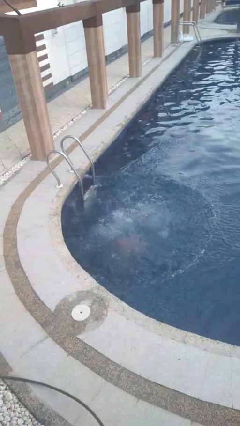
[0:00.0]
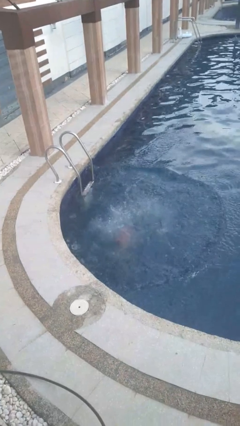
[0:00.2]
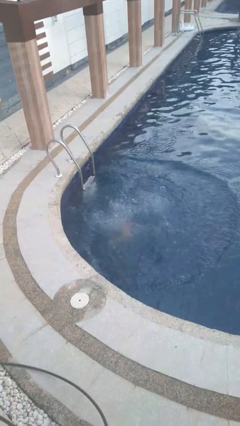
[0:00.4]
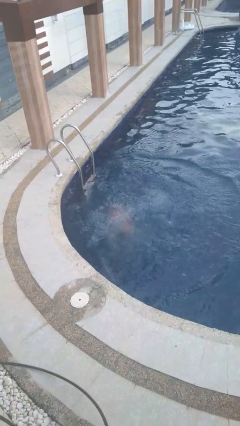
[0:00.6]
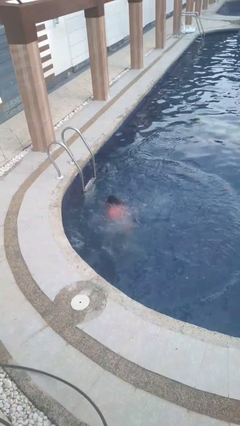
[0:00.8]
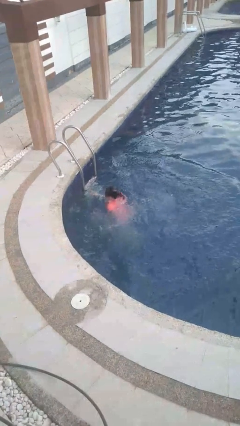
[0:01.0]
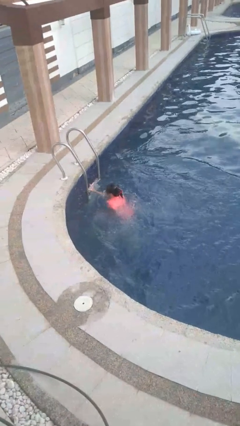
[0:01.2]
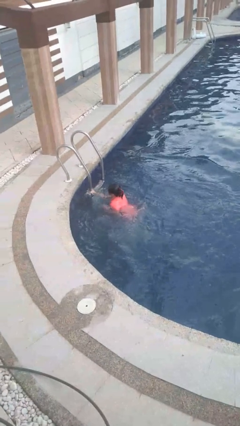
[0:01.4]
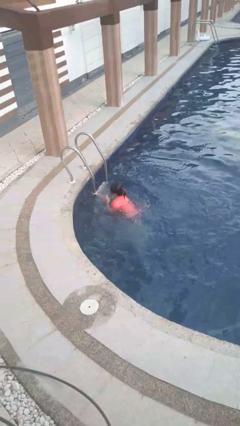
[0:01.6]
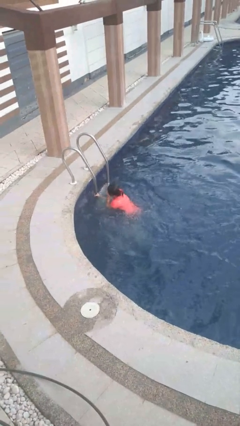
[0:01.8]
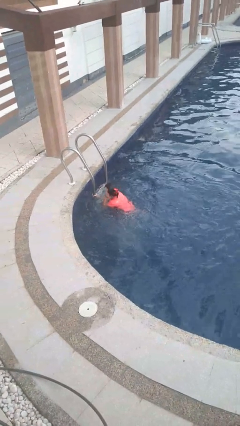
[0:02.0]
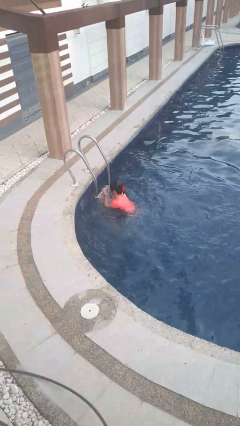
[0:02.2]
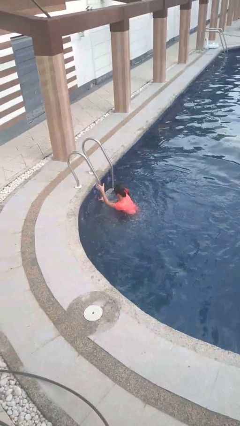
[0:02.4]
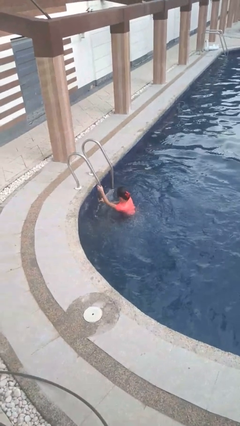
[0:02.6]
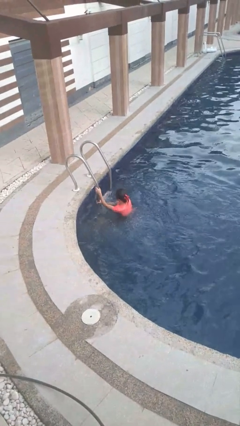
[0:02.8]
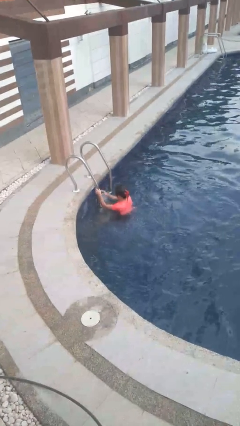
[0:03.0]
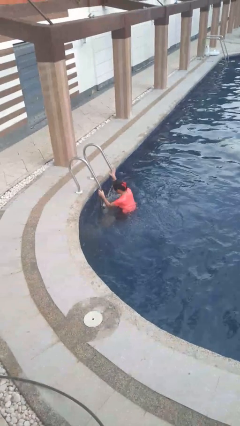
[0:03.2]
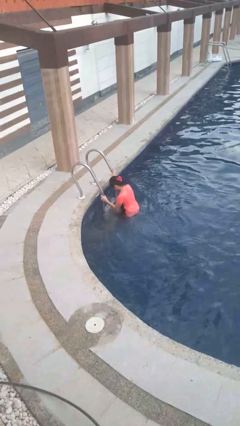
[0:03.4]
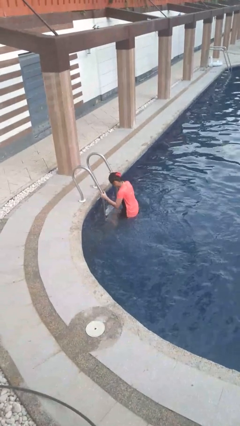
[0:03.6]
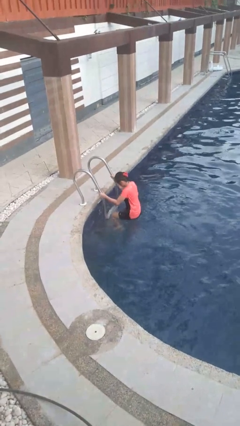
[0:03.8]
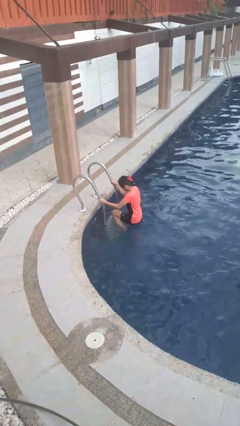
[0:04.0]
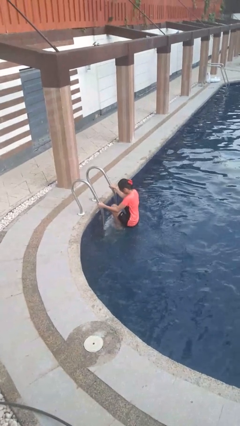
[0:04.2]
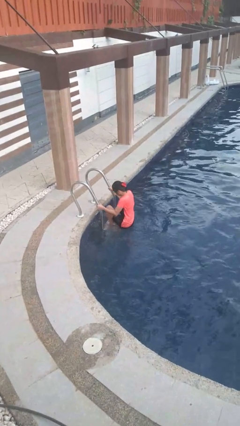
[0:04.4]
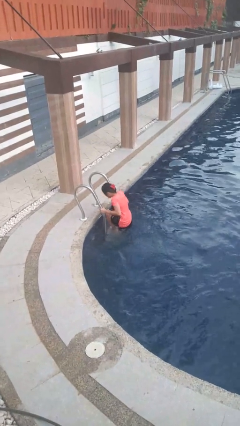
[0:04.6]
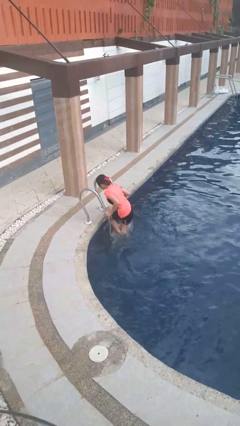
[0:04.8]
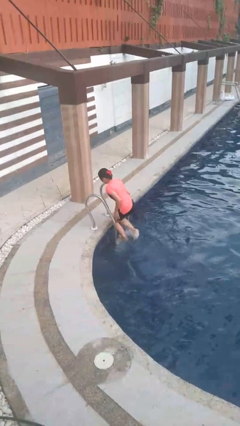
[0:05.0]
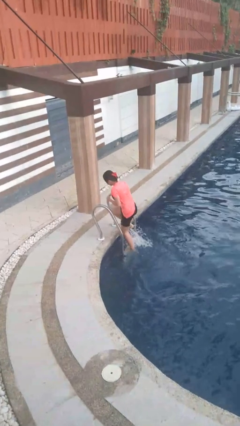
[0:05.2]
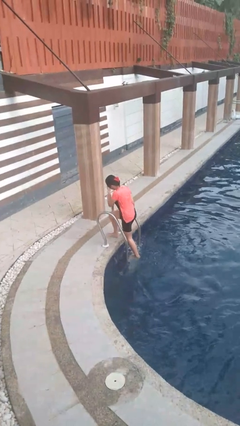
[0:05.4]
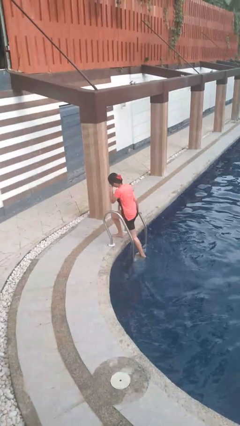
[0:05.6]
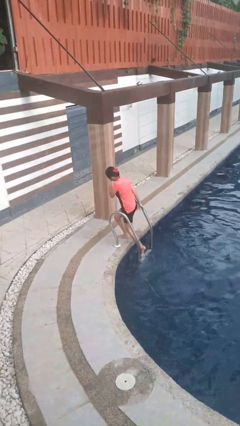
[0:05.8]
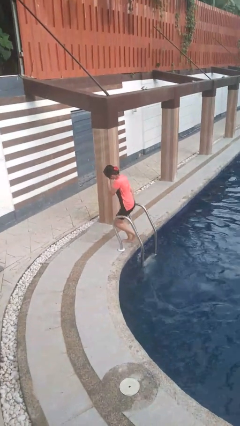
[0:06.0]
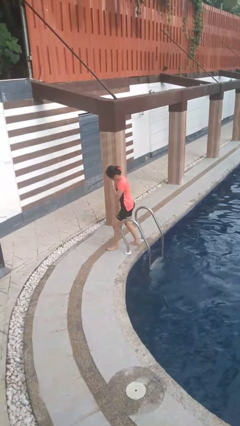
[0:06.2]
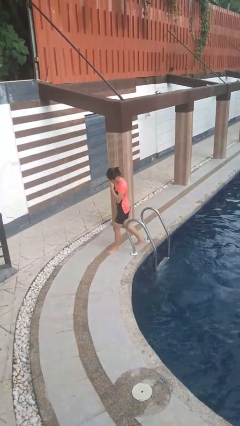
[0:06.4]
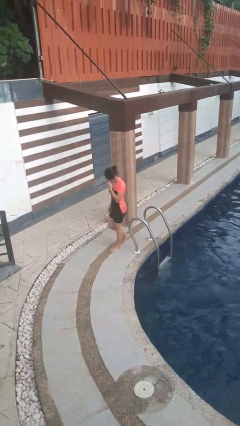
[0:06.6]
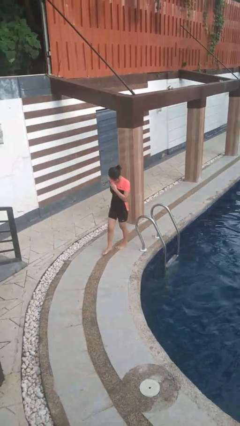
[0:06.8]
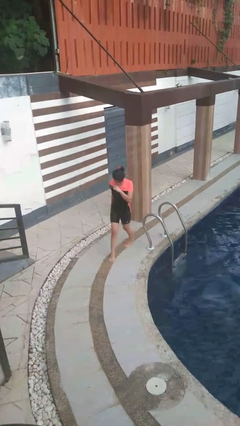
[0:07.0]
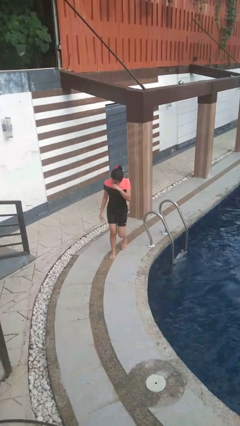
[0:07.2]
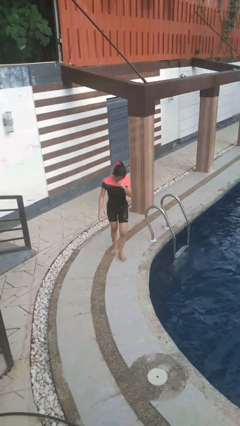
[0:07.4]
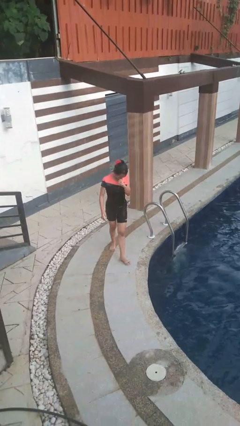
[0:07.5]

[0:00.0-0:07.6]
person exits pool

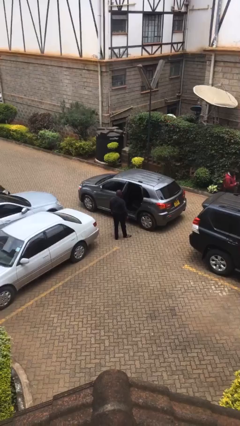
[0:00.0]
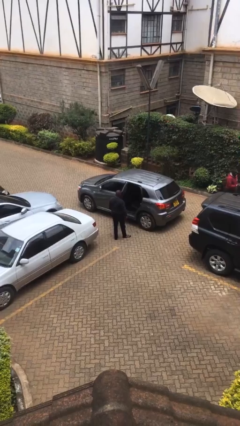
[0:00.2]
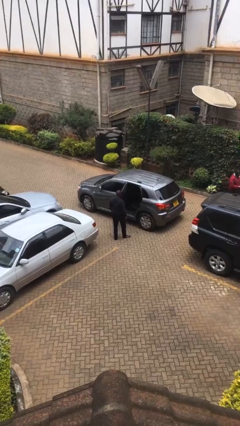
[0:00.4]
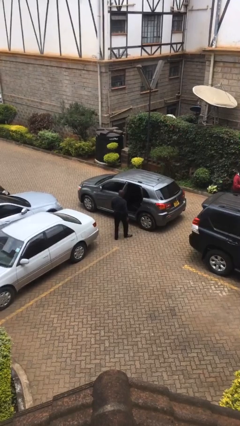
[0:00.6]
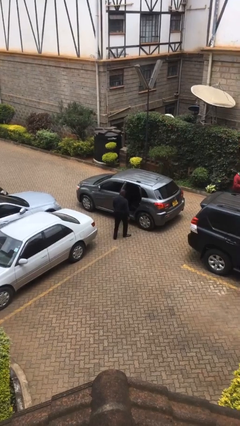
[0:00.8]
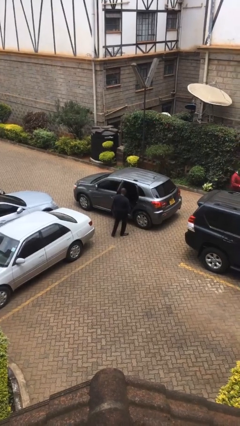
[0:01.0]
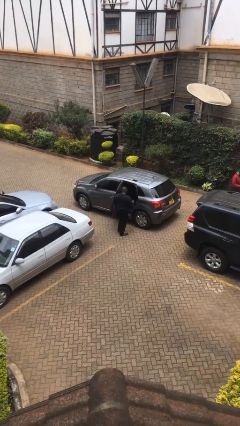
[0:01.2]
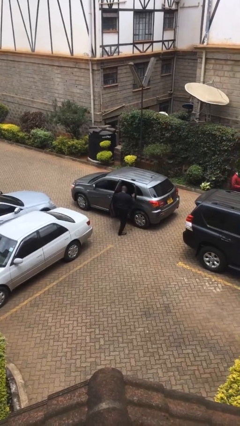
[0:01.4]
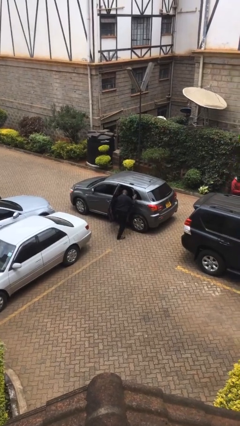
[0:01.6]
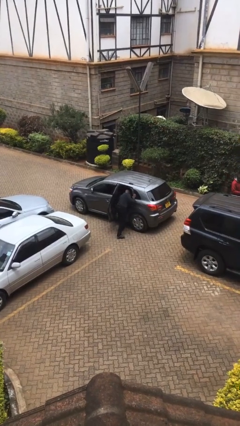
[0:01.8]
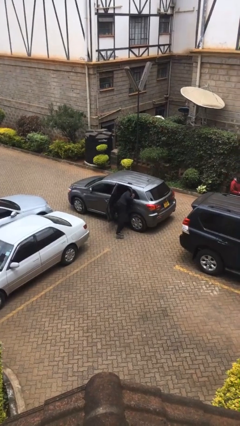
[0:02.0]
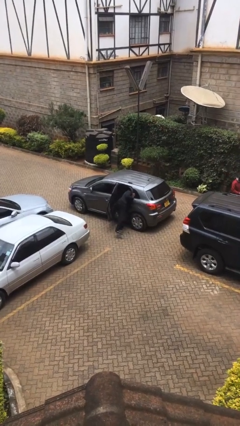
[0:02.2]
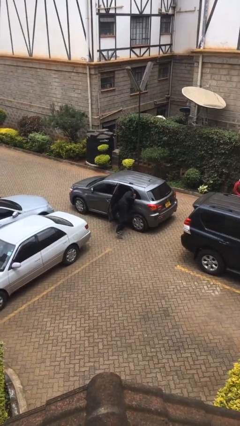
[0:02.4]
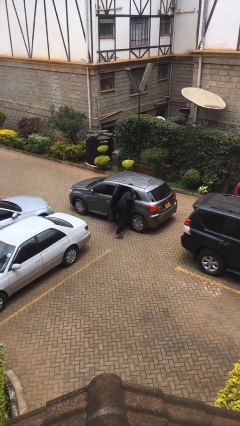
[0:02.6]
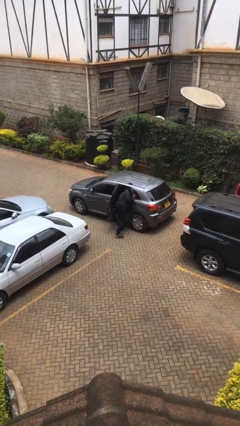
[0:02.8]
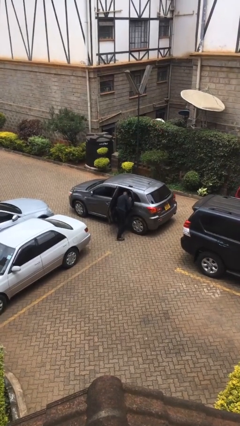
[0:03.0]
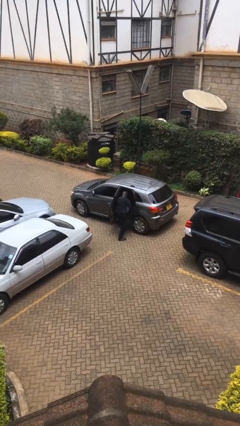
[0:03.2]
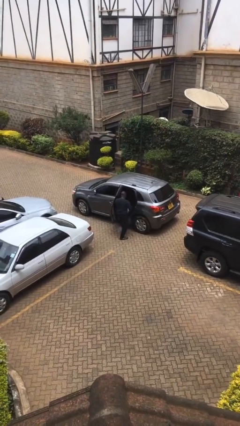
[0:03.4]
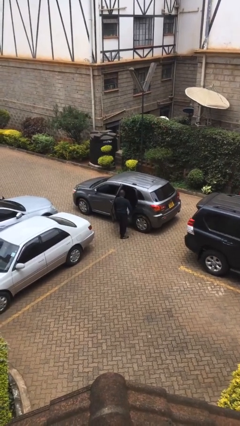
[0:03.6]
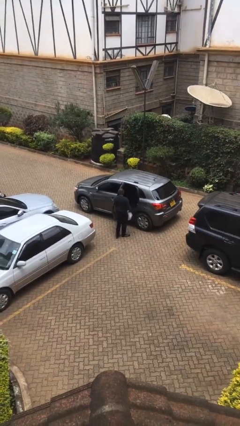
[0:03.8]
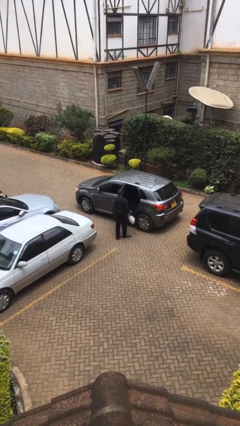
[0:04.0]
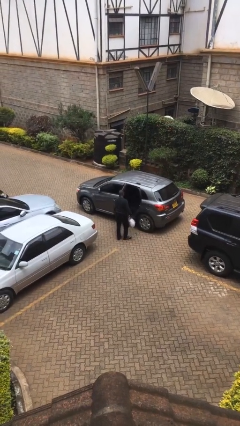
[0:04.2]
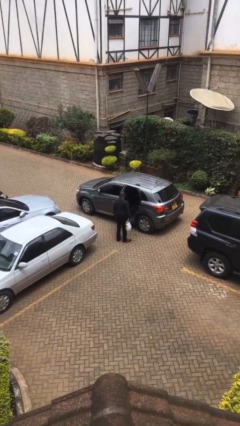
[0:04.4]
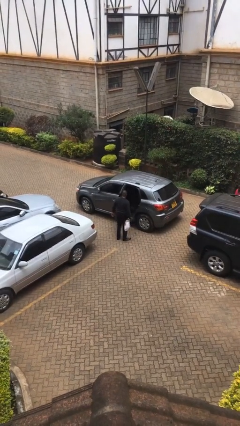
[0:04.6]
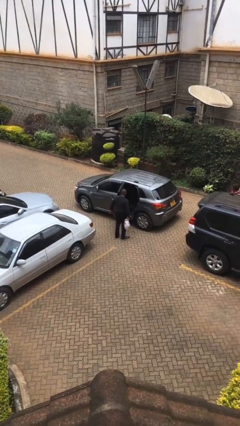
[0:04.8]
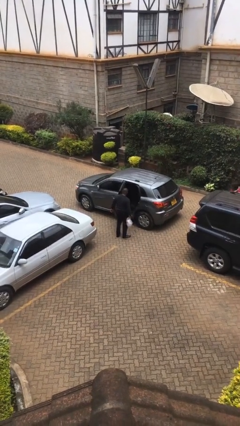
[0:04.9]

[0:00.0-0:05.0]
person unloads car

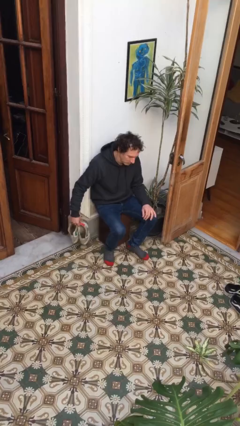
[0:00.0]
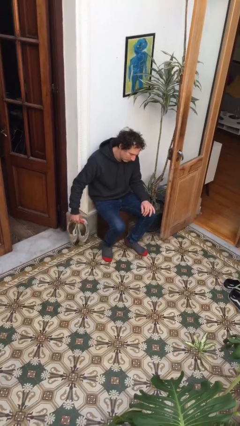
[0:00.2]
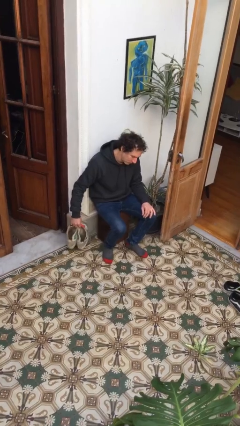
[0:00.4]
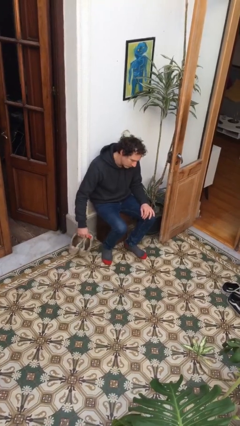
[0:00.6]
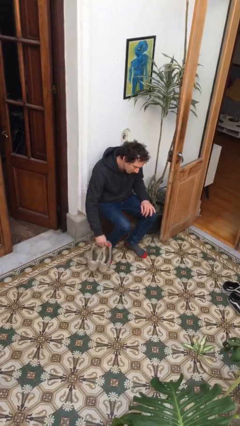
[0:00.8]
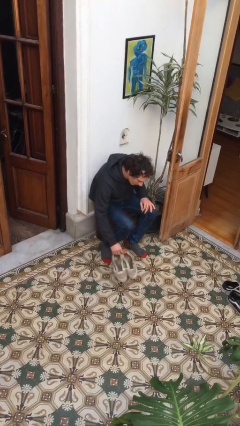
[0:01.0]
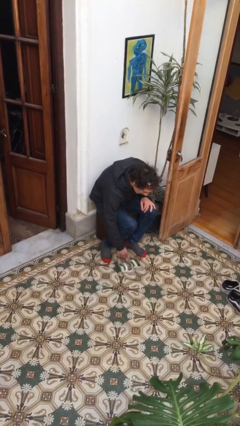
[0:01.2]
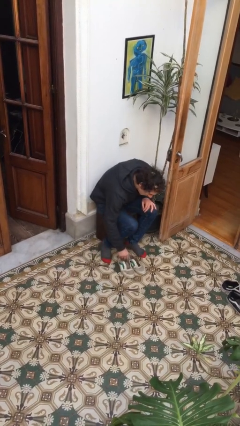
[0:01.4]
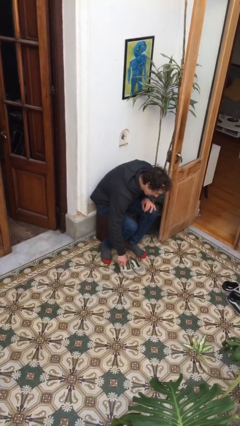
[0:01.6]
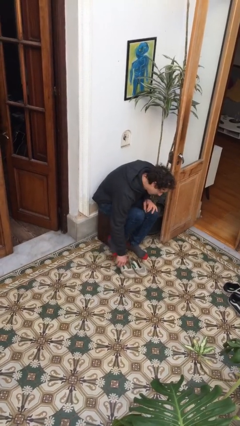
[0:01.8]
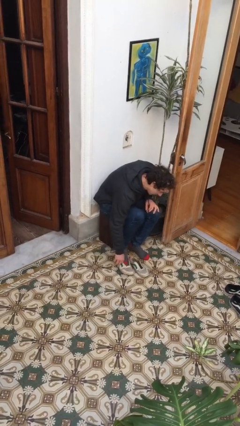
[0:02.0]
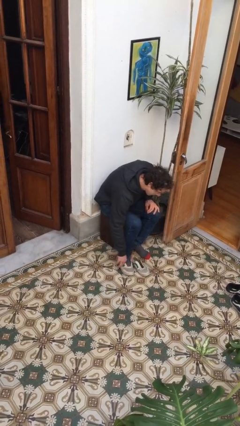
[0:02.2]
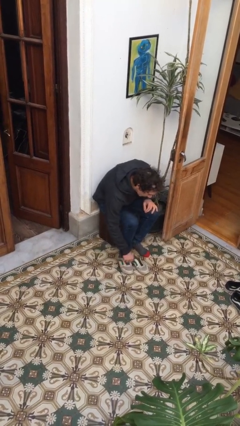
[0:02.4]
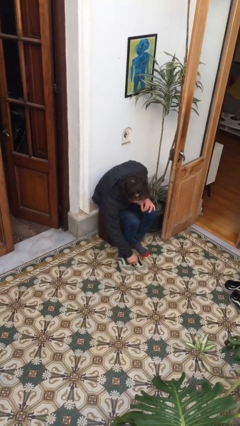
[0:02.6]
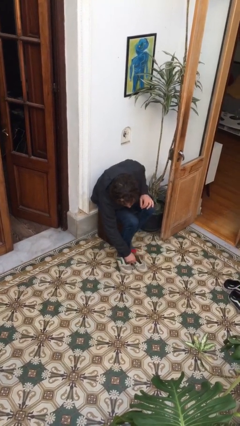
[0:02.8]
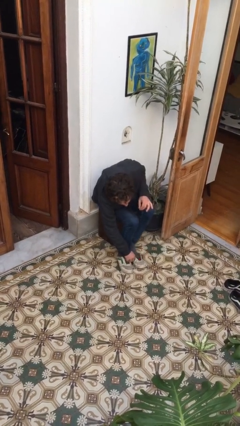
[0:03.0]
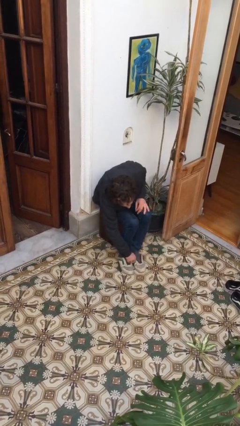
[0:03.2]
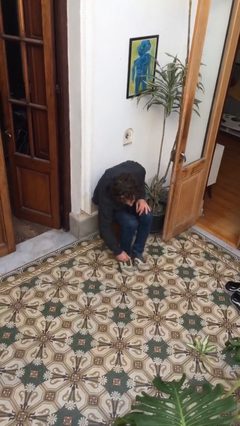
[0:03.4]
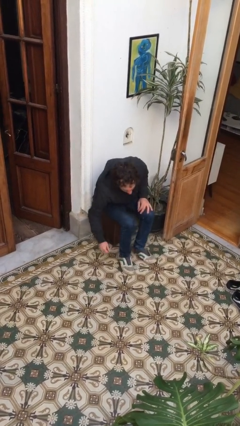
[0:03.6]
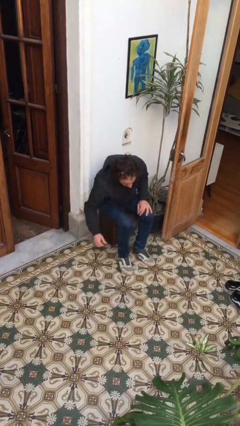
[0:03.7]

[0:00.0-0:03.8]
person puts on shoes

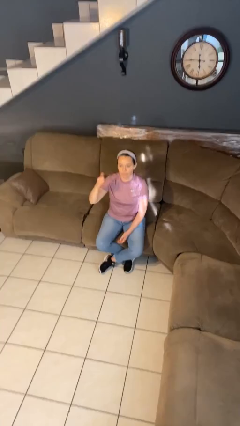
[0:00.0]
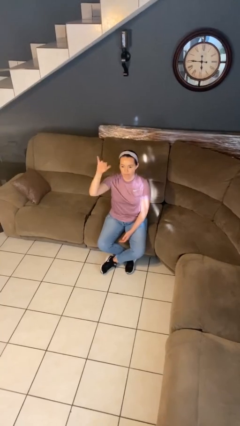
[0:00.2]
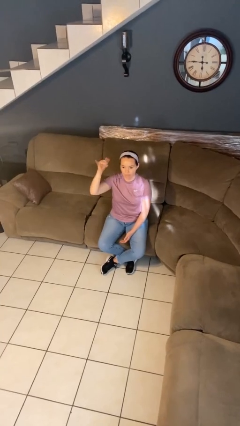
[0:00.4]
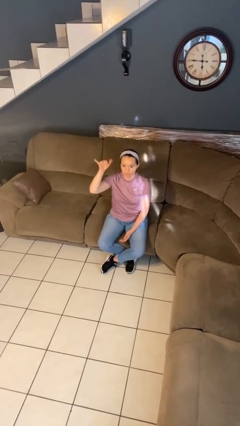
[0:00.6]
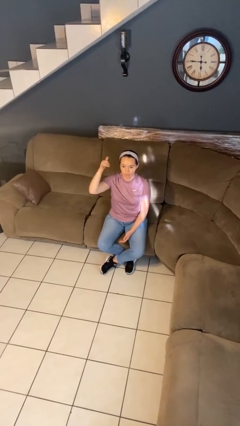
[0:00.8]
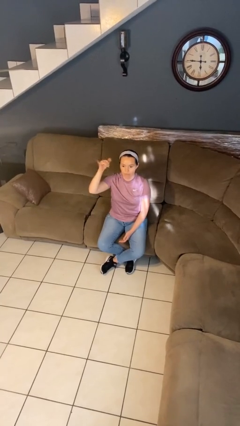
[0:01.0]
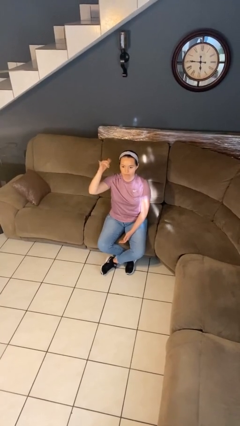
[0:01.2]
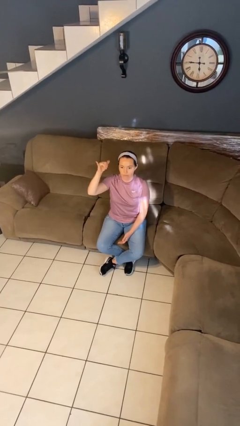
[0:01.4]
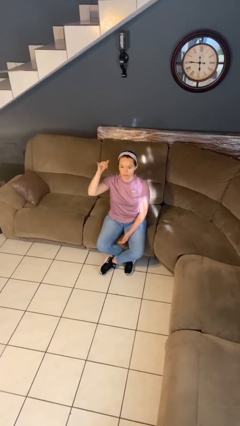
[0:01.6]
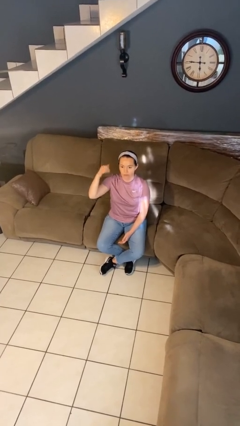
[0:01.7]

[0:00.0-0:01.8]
person gestures hang loose
